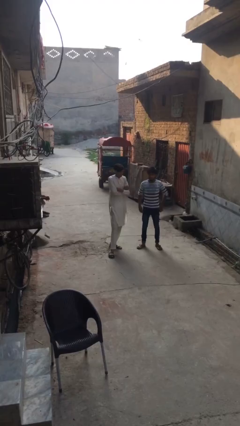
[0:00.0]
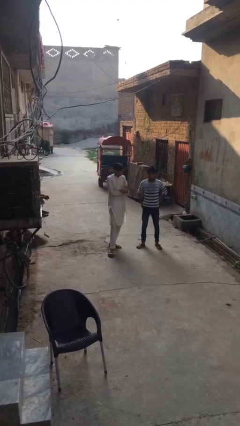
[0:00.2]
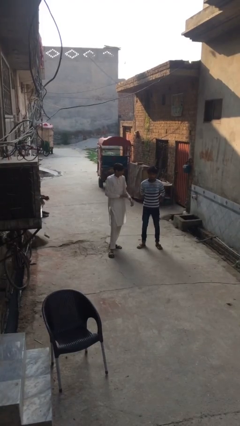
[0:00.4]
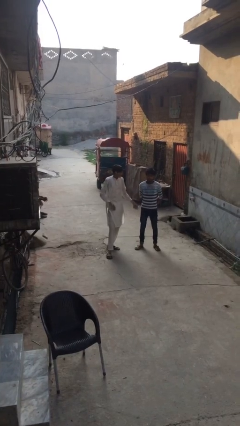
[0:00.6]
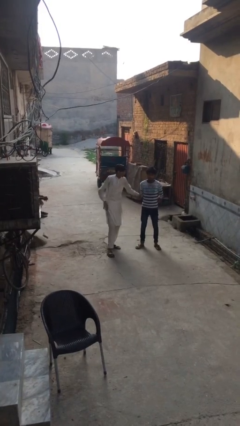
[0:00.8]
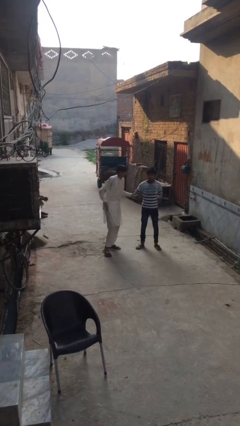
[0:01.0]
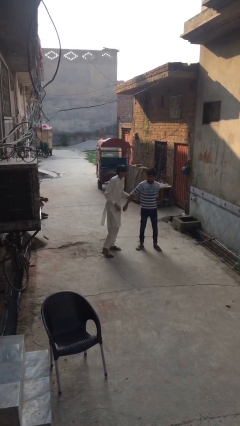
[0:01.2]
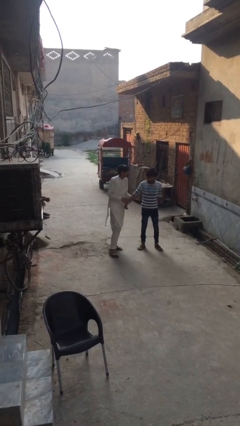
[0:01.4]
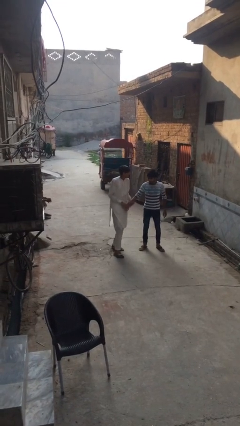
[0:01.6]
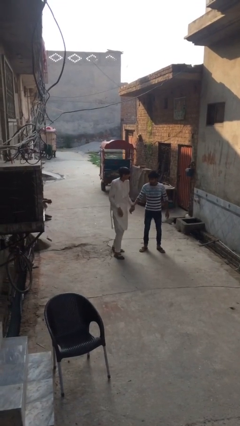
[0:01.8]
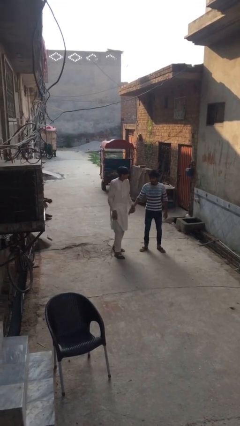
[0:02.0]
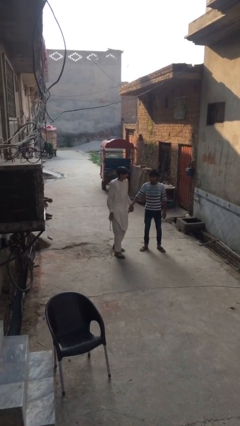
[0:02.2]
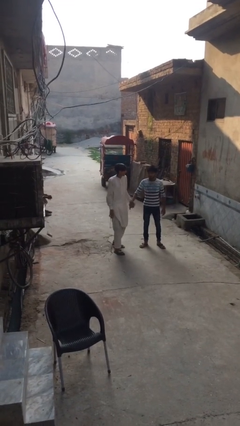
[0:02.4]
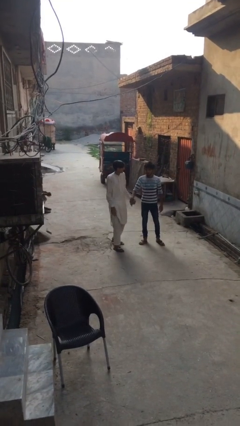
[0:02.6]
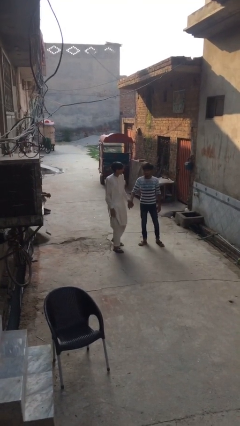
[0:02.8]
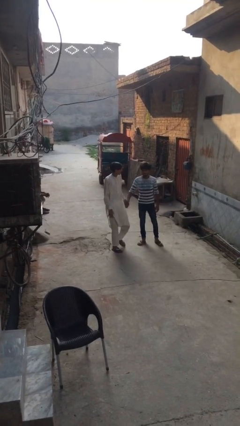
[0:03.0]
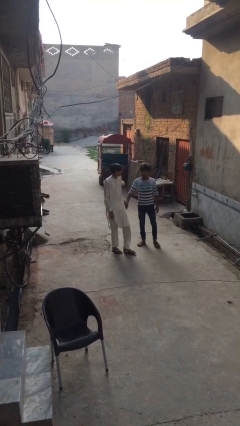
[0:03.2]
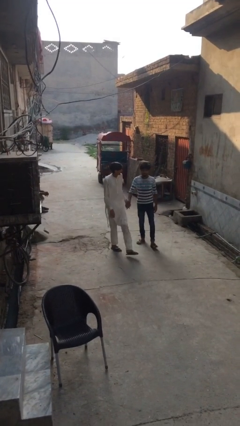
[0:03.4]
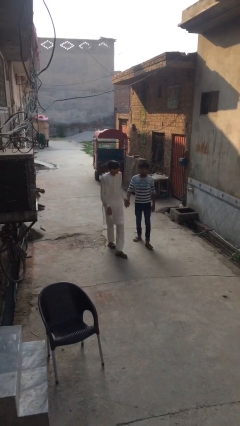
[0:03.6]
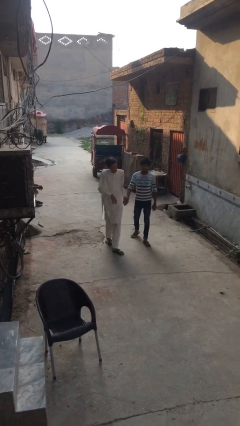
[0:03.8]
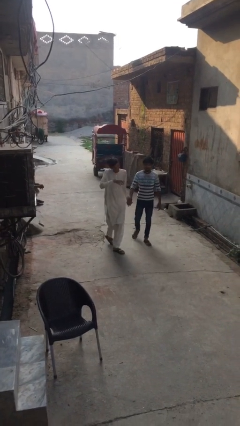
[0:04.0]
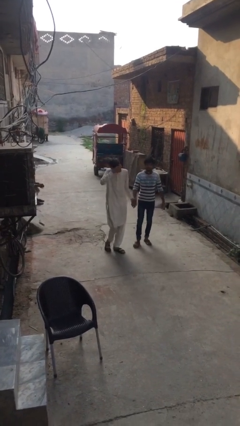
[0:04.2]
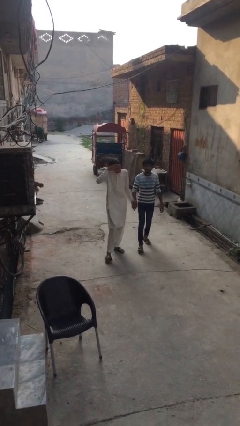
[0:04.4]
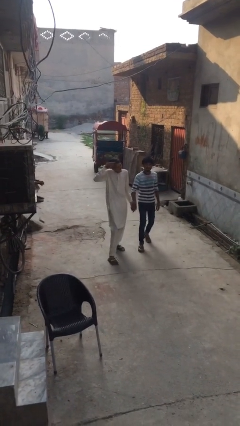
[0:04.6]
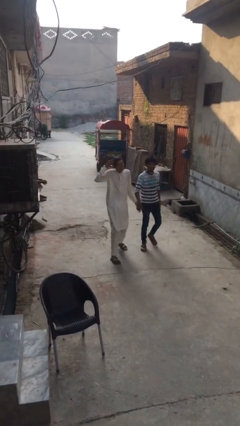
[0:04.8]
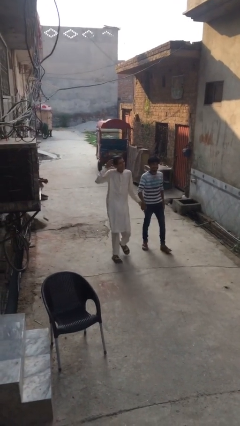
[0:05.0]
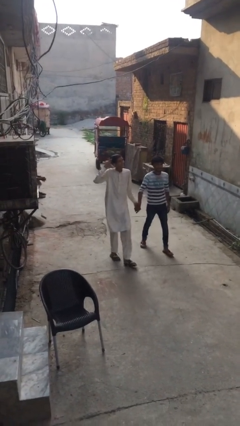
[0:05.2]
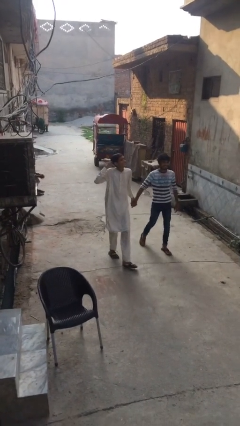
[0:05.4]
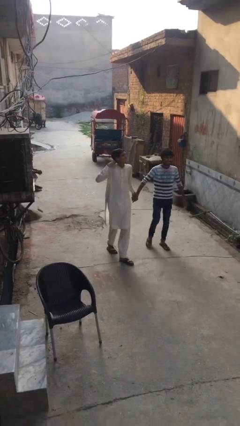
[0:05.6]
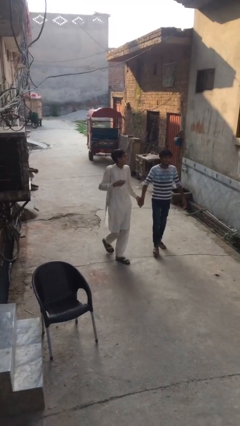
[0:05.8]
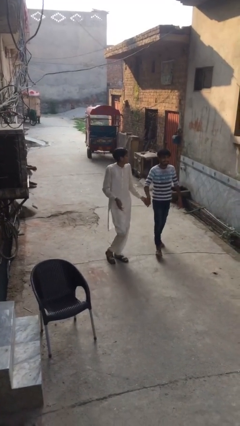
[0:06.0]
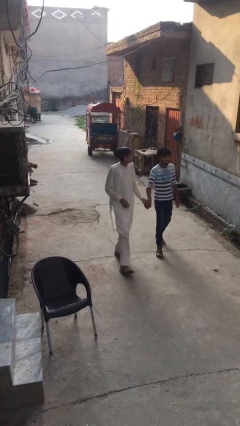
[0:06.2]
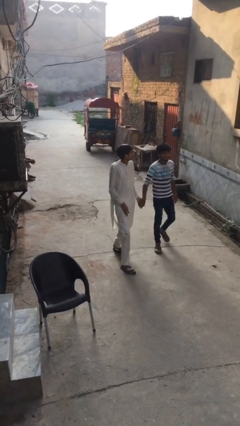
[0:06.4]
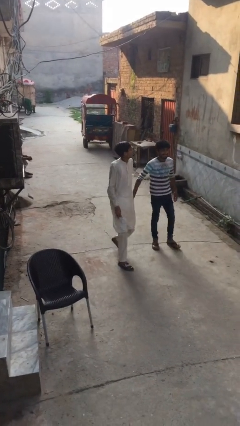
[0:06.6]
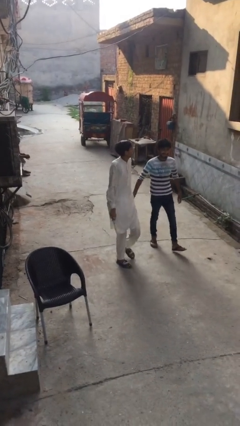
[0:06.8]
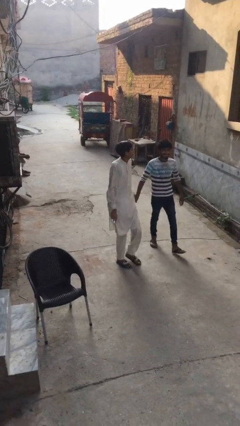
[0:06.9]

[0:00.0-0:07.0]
person holds hand

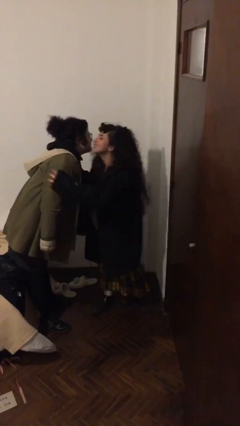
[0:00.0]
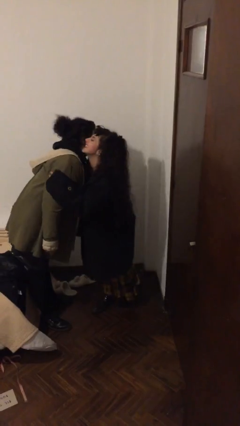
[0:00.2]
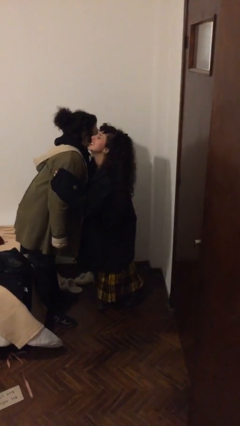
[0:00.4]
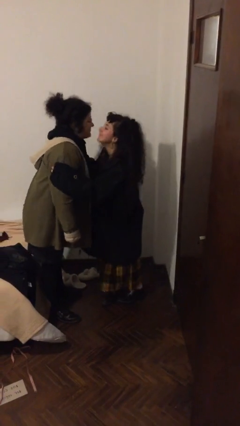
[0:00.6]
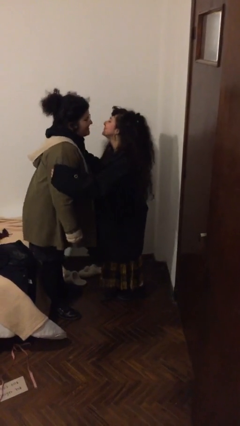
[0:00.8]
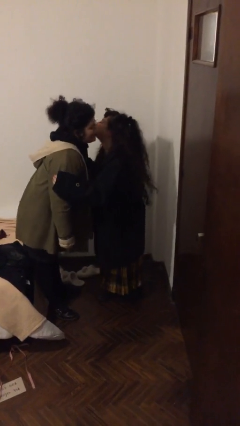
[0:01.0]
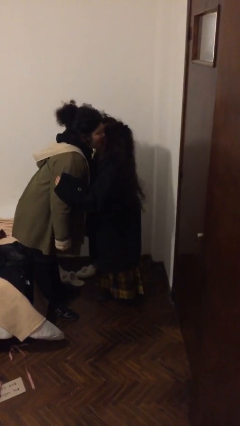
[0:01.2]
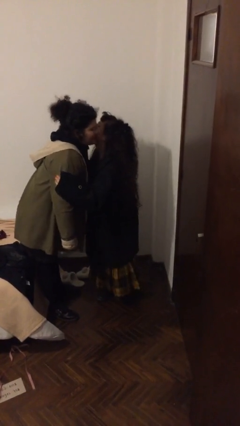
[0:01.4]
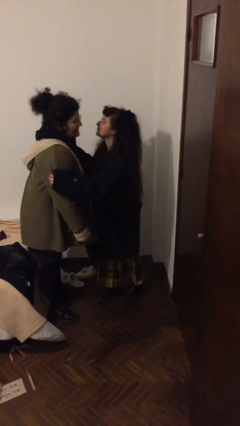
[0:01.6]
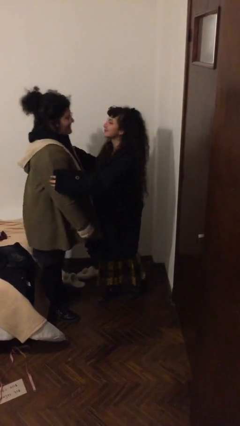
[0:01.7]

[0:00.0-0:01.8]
person kisses cheek of person

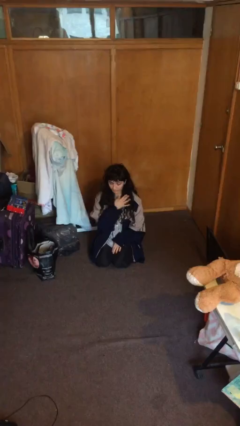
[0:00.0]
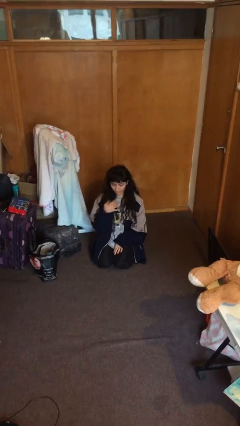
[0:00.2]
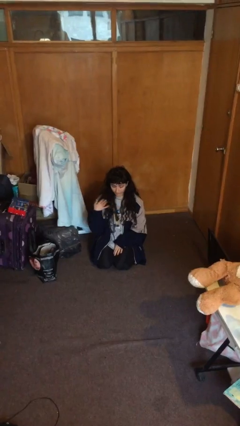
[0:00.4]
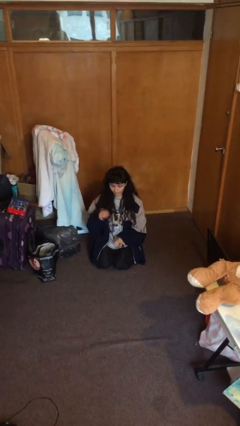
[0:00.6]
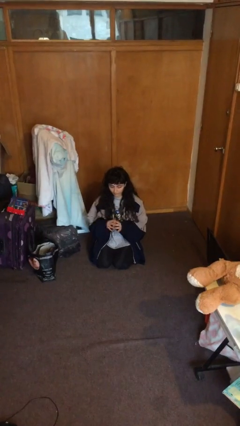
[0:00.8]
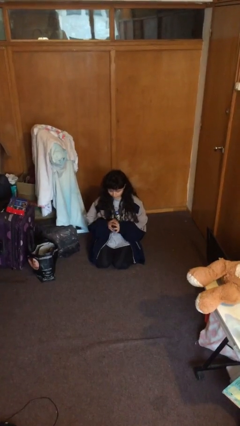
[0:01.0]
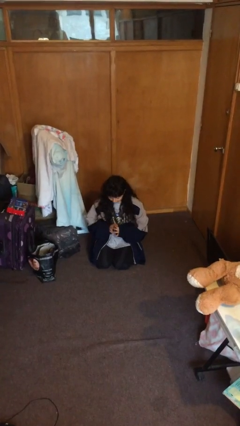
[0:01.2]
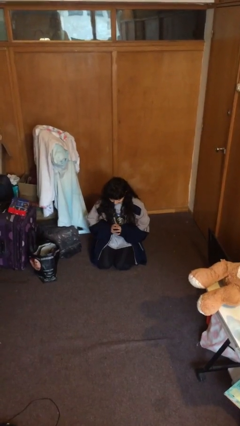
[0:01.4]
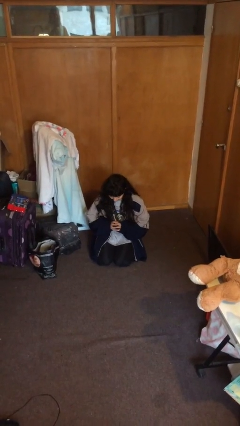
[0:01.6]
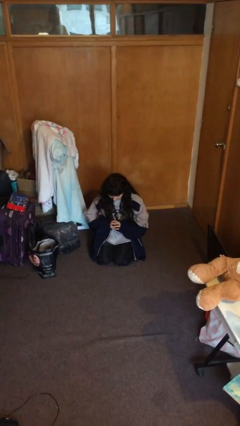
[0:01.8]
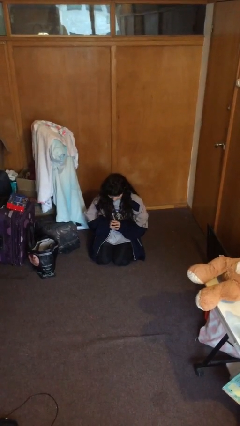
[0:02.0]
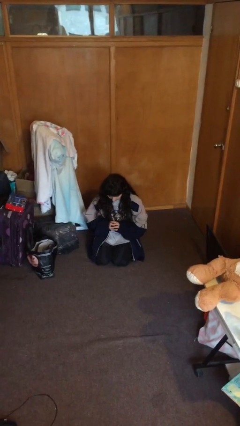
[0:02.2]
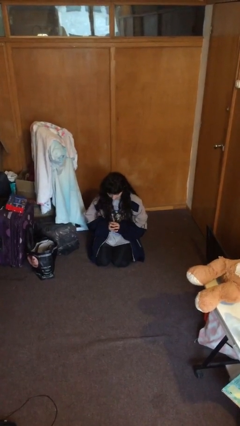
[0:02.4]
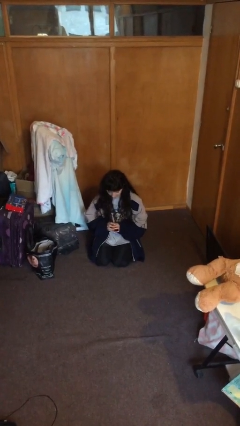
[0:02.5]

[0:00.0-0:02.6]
person prays

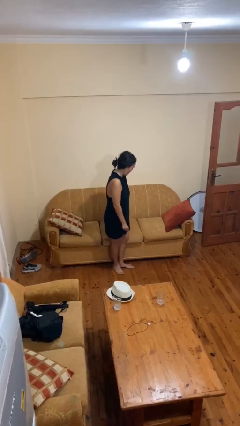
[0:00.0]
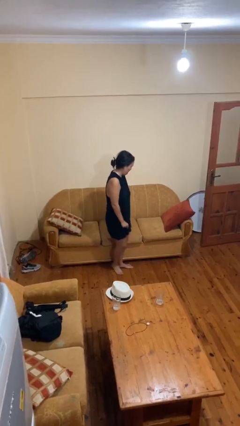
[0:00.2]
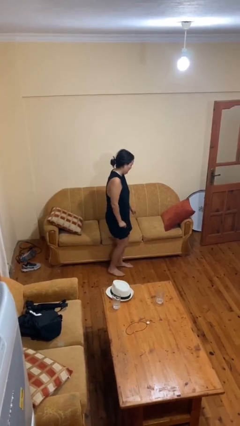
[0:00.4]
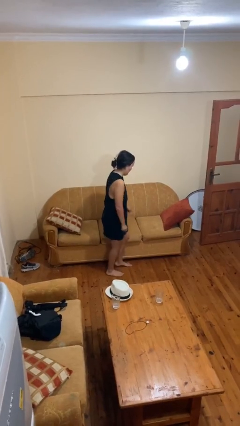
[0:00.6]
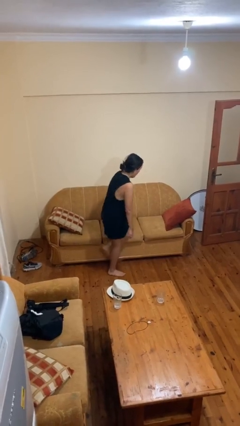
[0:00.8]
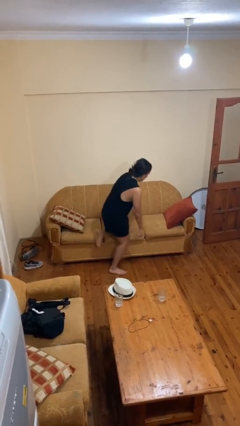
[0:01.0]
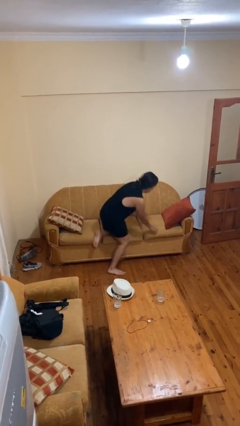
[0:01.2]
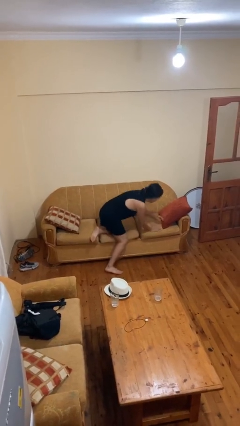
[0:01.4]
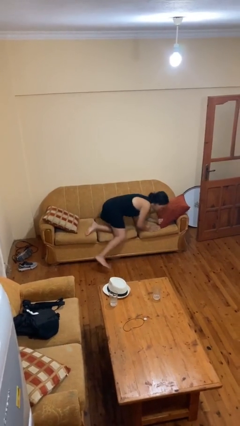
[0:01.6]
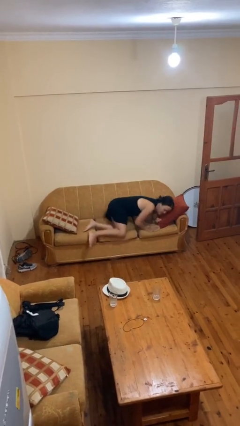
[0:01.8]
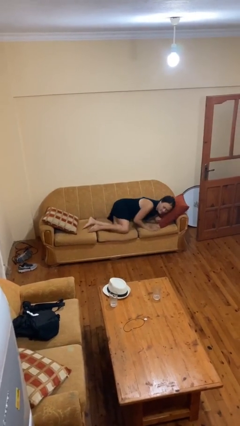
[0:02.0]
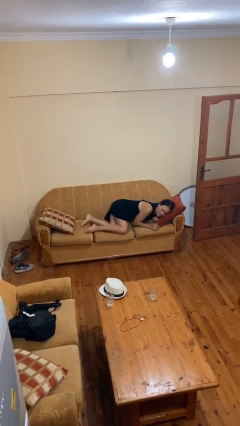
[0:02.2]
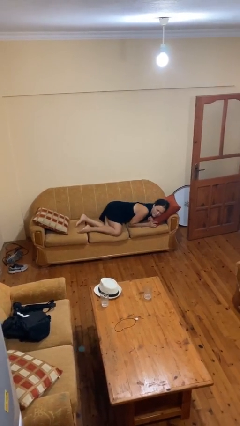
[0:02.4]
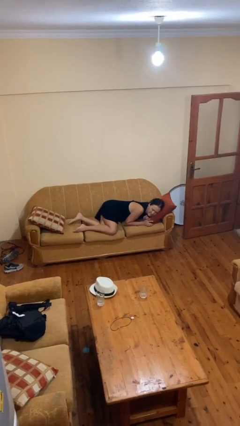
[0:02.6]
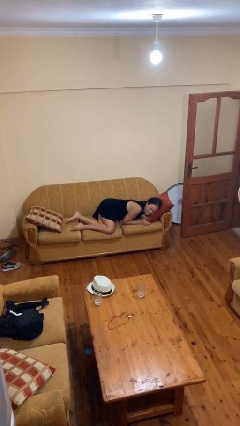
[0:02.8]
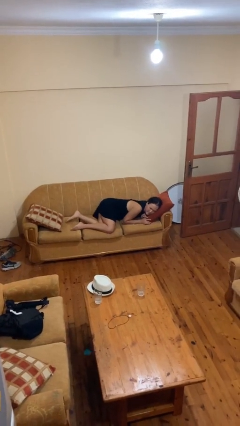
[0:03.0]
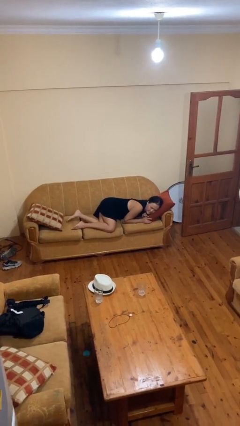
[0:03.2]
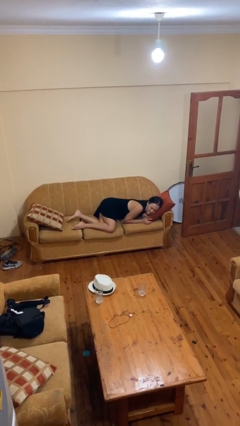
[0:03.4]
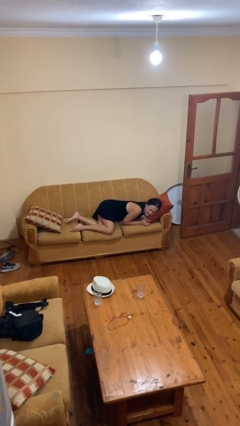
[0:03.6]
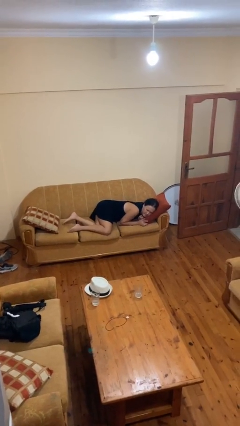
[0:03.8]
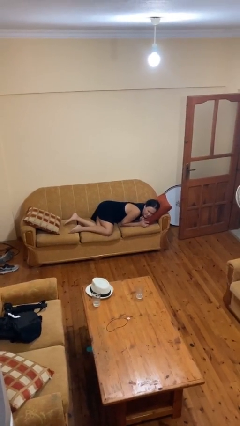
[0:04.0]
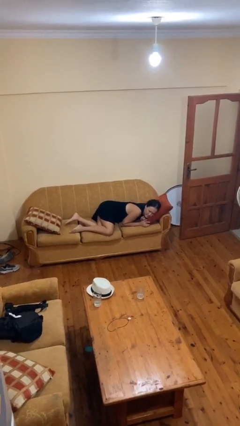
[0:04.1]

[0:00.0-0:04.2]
person lies down on couch

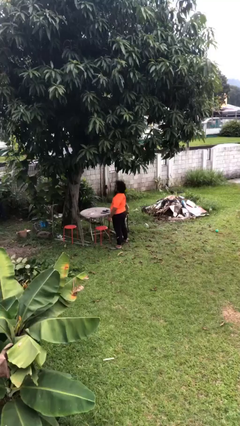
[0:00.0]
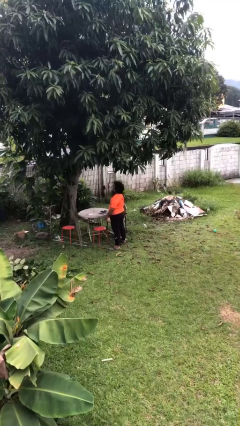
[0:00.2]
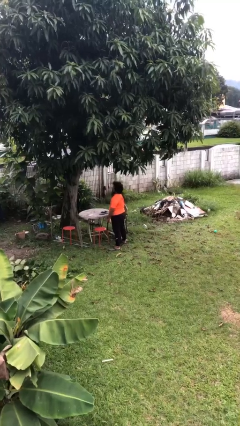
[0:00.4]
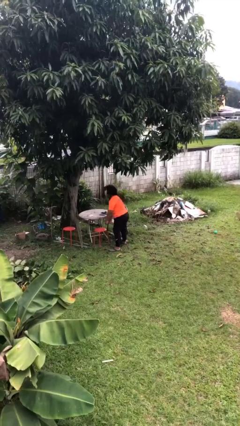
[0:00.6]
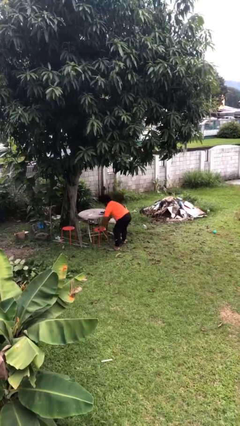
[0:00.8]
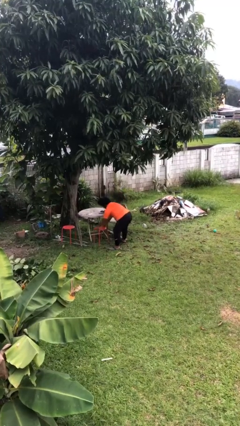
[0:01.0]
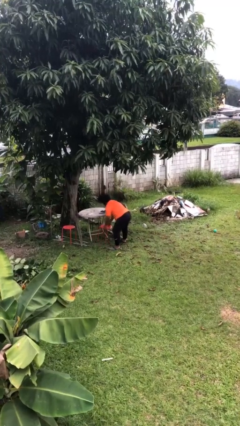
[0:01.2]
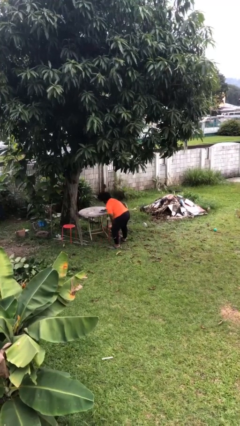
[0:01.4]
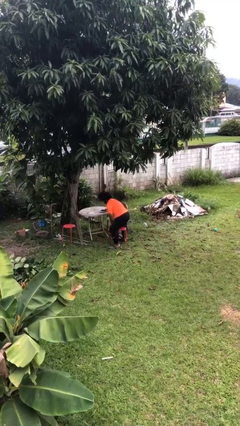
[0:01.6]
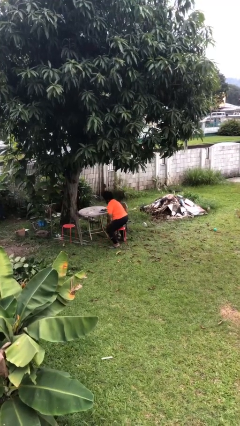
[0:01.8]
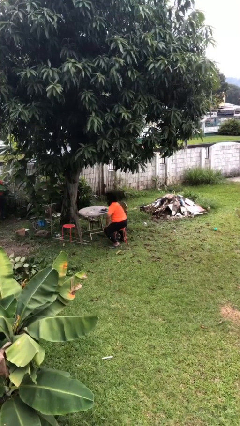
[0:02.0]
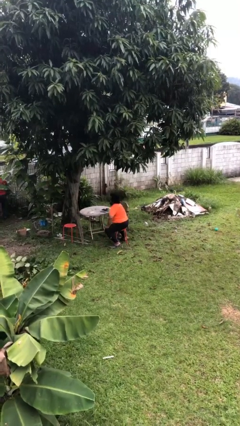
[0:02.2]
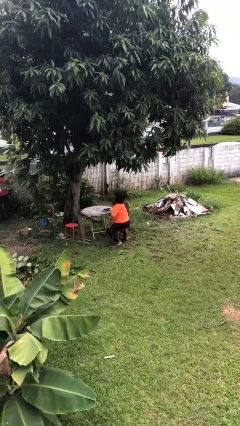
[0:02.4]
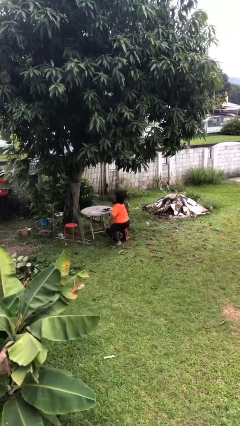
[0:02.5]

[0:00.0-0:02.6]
person sits down
